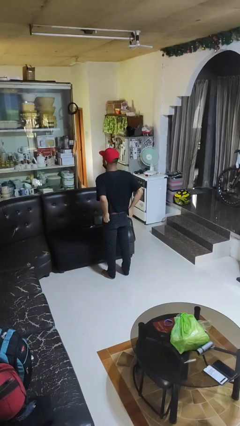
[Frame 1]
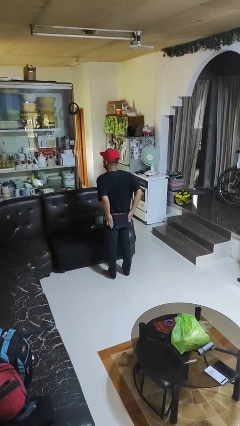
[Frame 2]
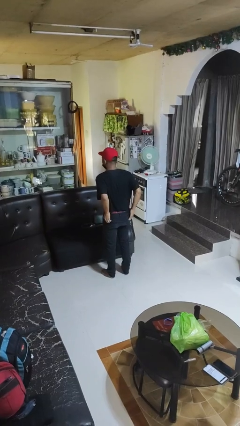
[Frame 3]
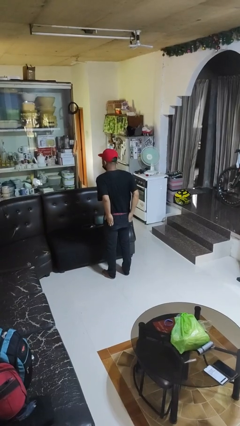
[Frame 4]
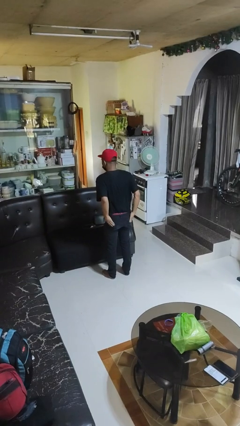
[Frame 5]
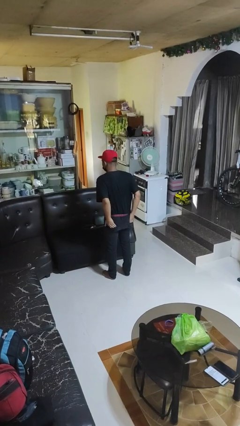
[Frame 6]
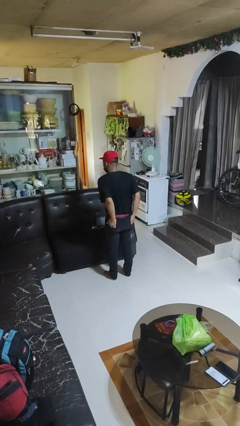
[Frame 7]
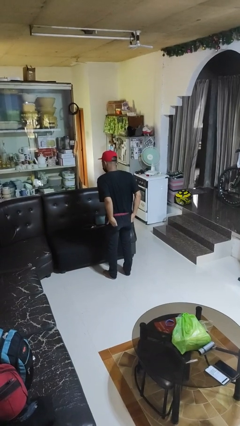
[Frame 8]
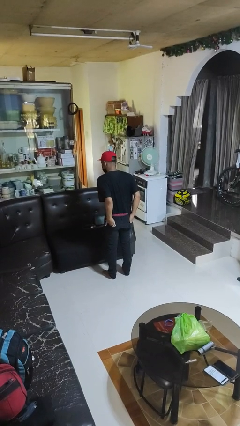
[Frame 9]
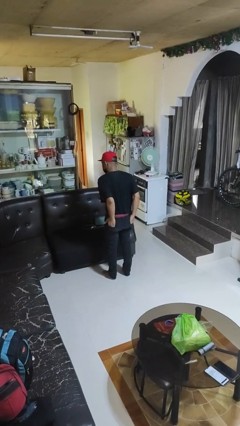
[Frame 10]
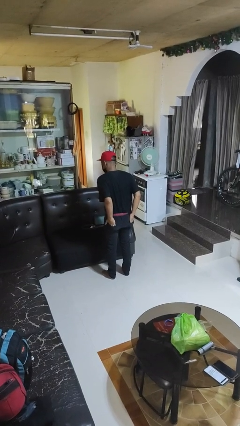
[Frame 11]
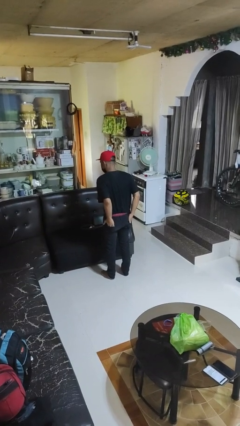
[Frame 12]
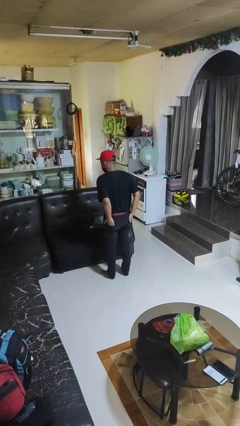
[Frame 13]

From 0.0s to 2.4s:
person puts hands in back pockets

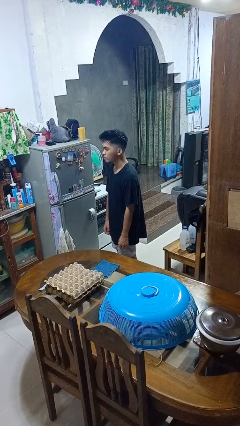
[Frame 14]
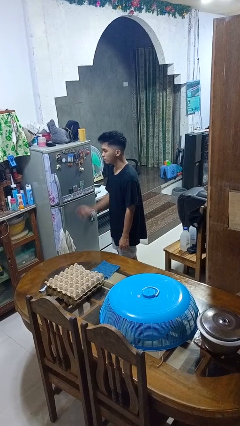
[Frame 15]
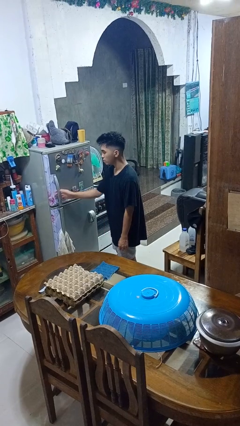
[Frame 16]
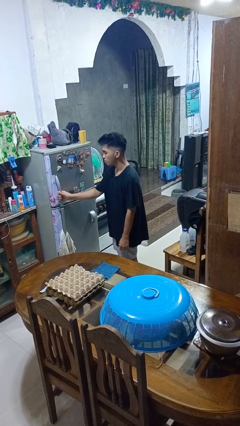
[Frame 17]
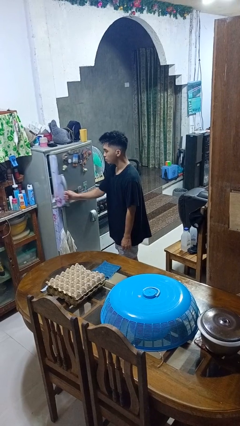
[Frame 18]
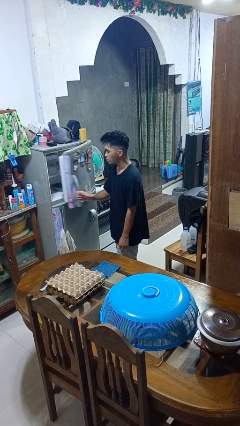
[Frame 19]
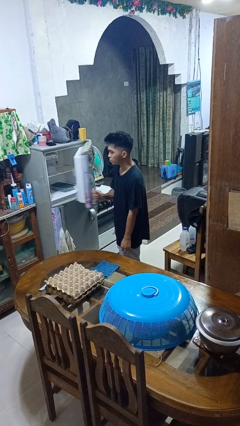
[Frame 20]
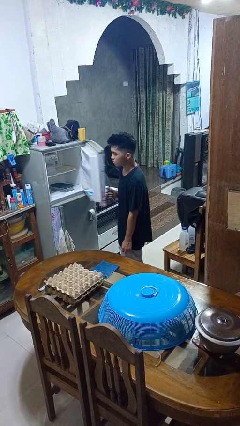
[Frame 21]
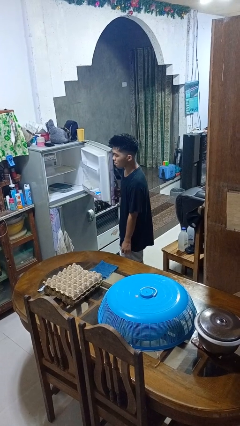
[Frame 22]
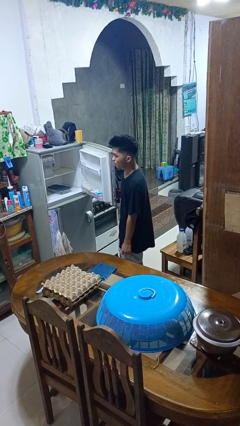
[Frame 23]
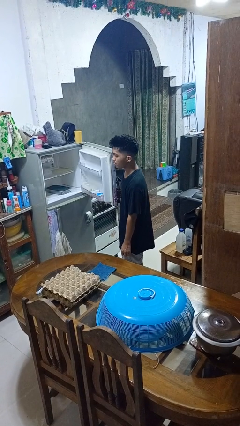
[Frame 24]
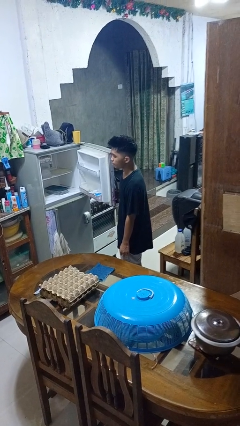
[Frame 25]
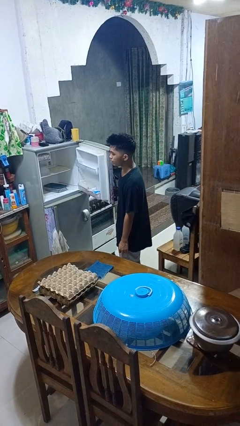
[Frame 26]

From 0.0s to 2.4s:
person opens refrigerator

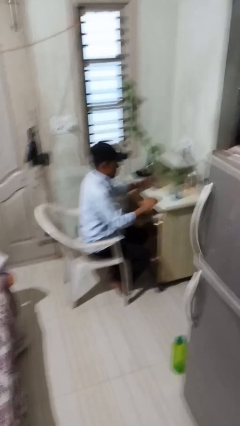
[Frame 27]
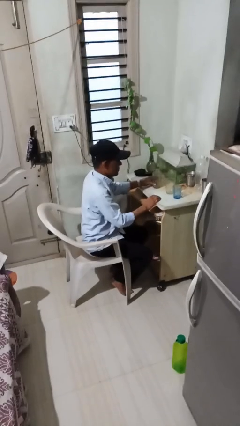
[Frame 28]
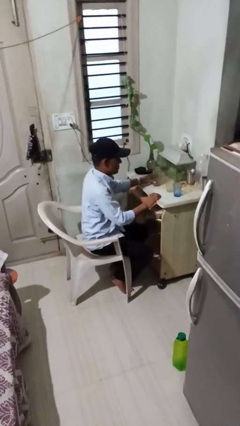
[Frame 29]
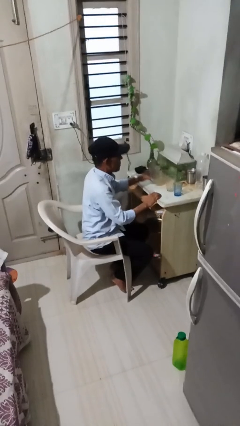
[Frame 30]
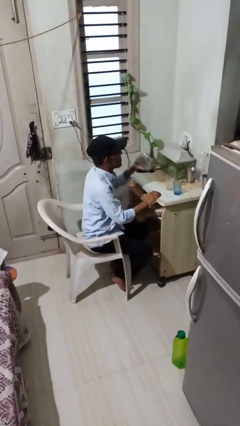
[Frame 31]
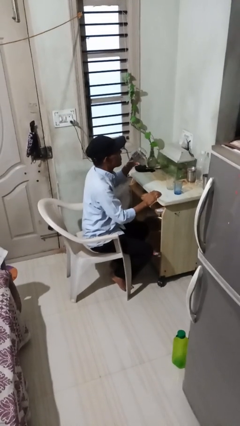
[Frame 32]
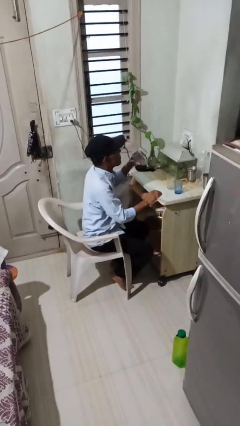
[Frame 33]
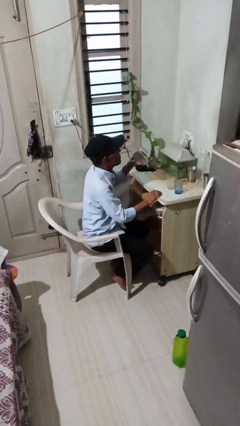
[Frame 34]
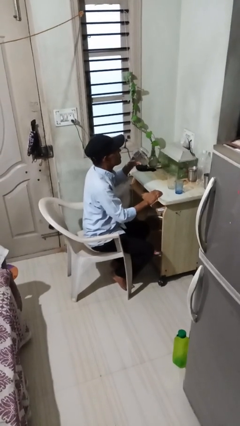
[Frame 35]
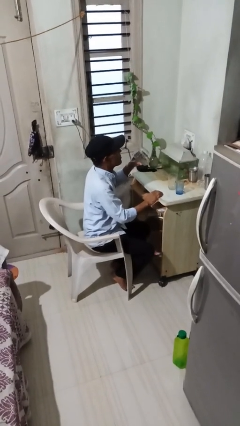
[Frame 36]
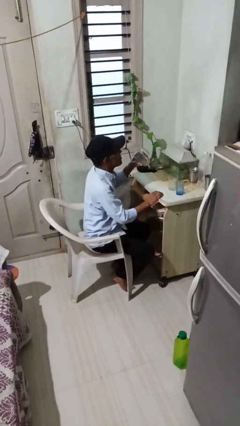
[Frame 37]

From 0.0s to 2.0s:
person picks up object from table

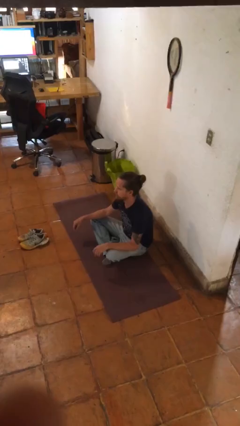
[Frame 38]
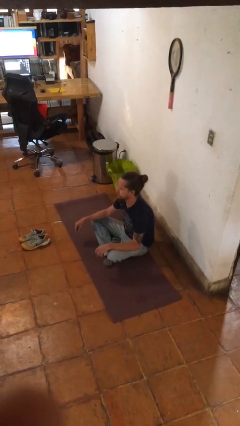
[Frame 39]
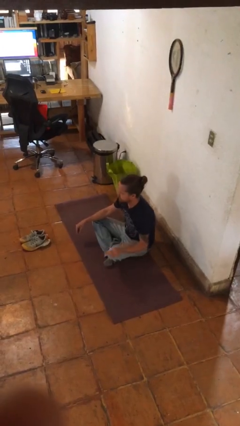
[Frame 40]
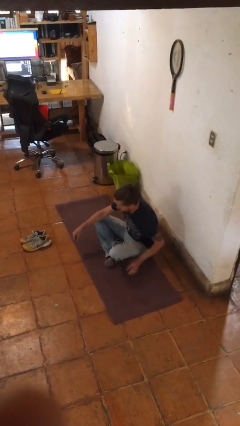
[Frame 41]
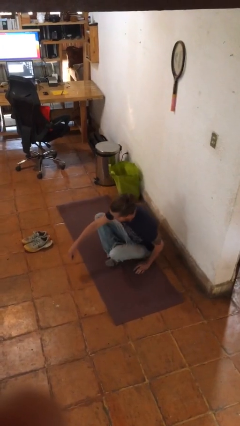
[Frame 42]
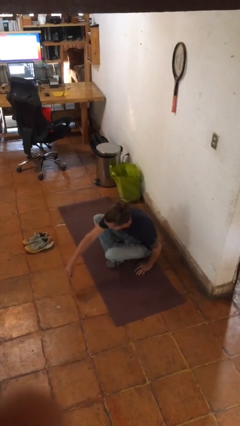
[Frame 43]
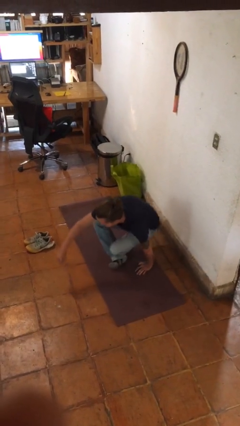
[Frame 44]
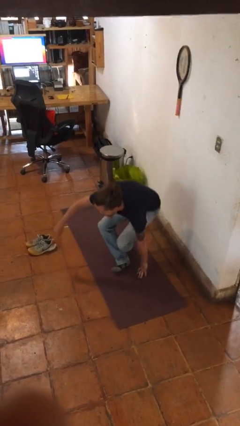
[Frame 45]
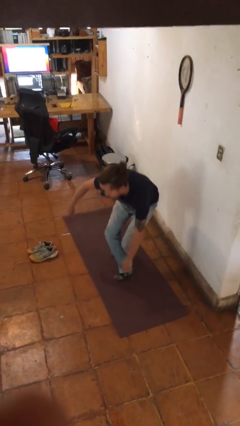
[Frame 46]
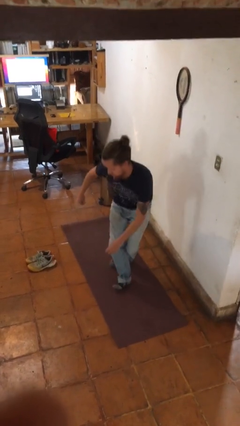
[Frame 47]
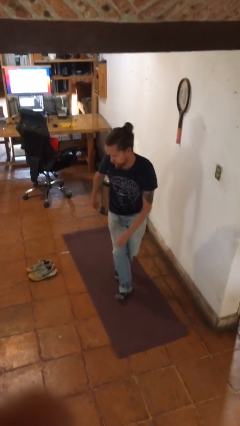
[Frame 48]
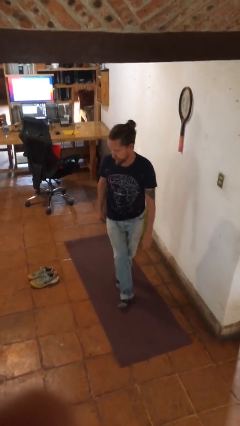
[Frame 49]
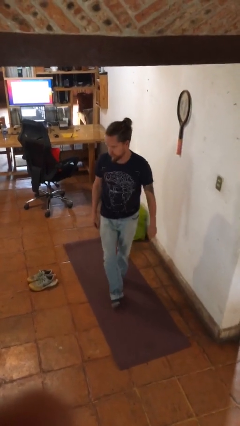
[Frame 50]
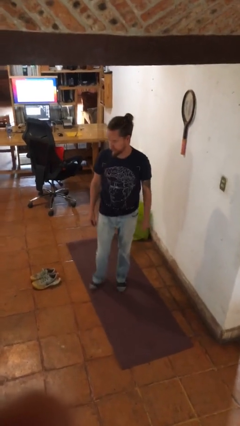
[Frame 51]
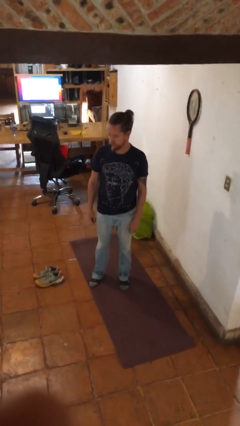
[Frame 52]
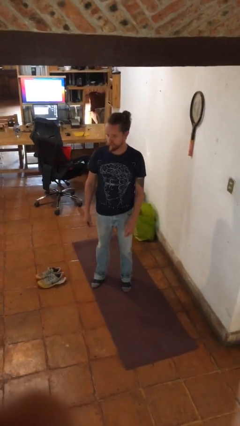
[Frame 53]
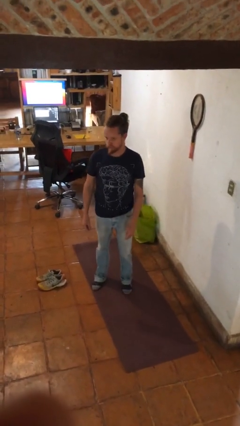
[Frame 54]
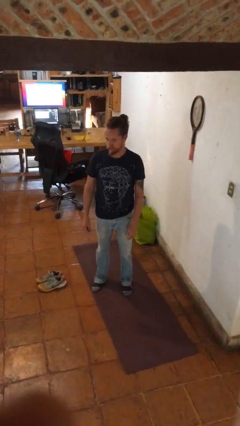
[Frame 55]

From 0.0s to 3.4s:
person stands up from floor

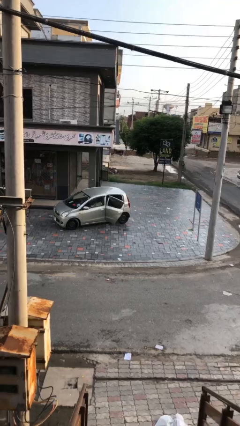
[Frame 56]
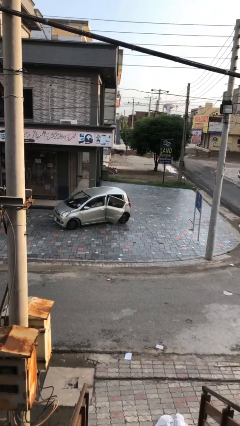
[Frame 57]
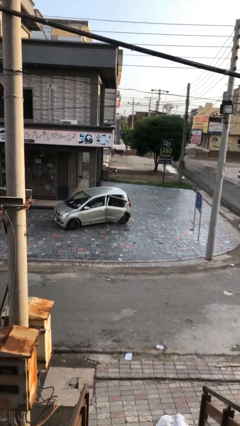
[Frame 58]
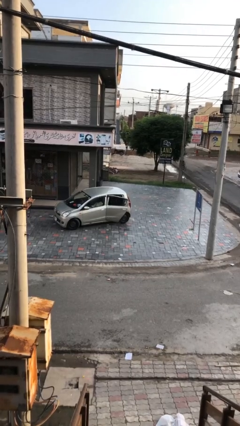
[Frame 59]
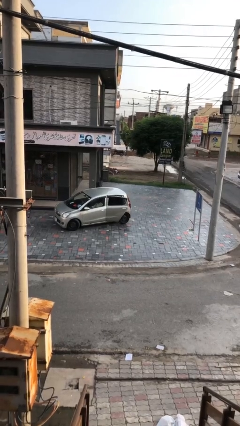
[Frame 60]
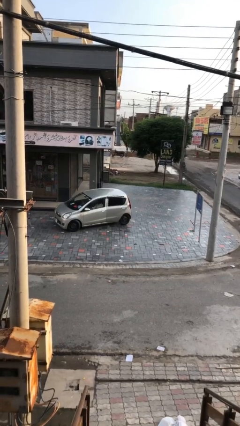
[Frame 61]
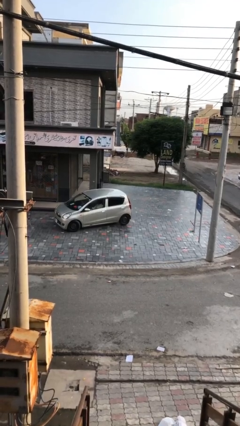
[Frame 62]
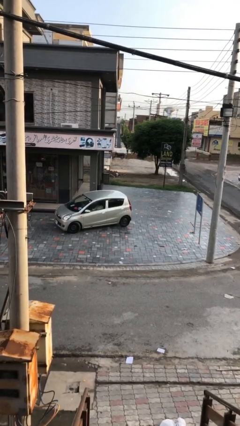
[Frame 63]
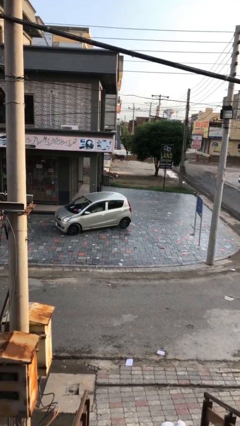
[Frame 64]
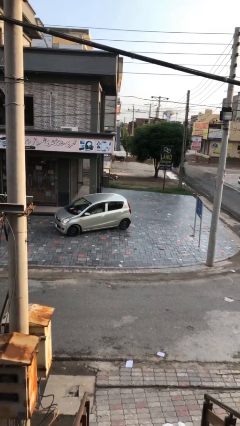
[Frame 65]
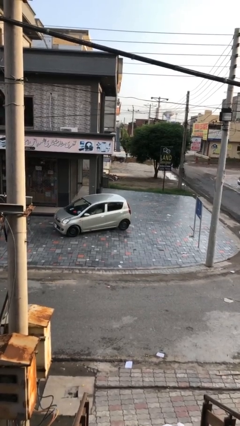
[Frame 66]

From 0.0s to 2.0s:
person closes car door

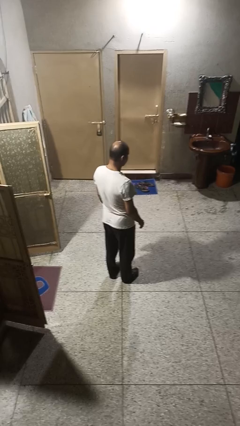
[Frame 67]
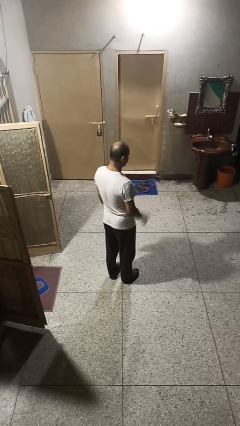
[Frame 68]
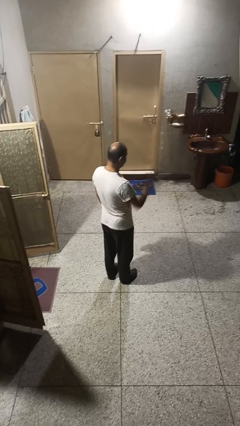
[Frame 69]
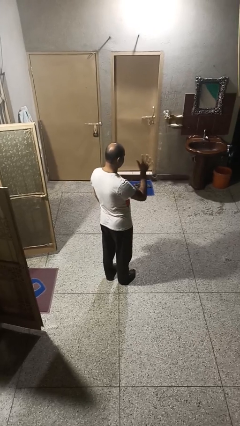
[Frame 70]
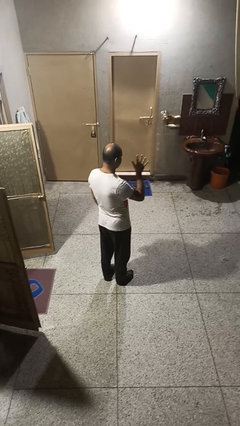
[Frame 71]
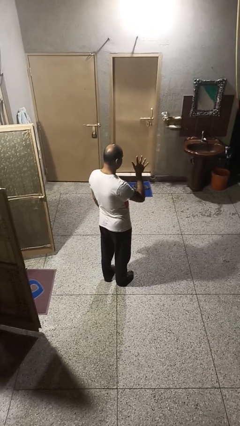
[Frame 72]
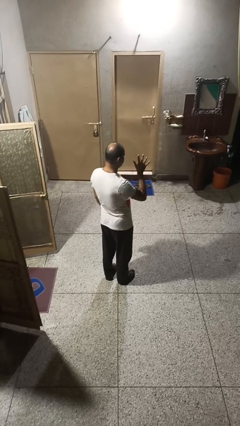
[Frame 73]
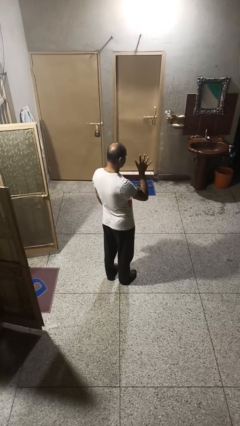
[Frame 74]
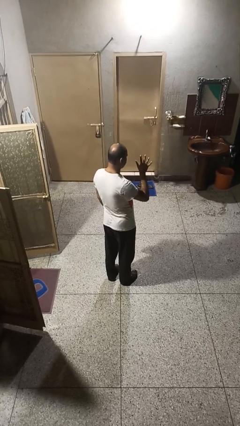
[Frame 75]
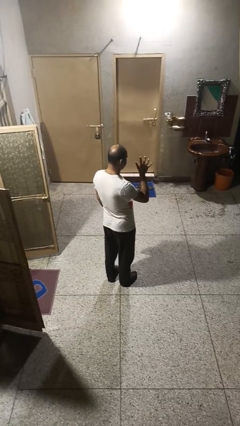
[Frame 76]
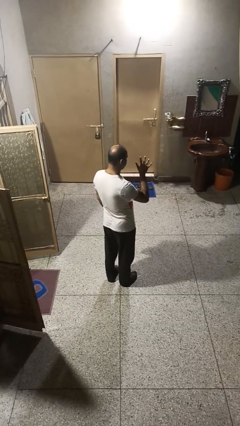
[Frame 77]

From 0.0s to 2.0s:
person gestures number five

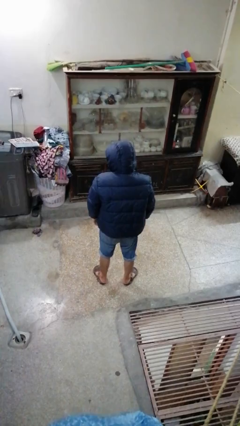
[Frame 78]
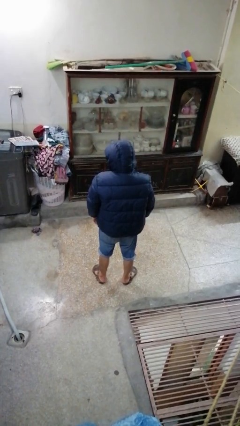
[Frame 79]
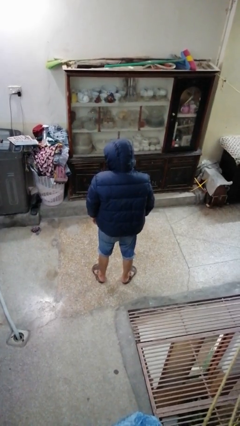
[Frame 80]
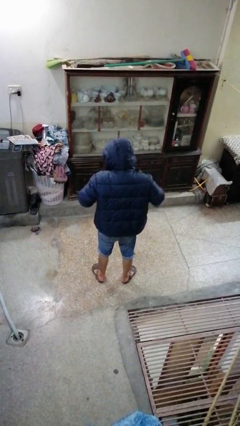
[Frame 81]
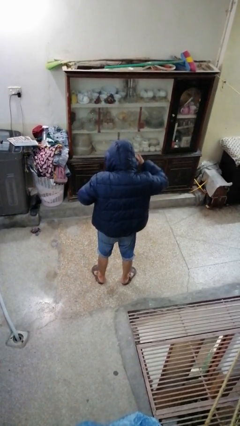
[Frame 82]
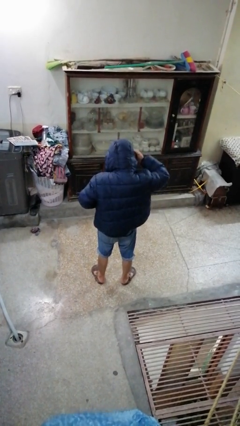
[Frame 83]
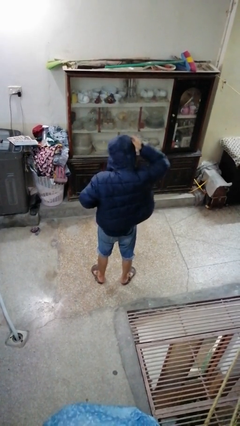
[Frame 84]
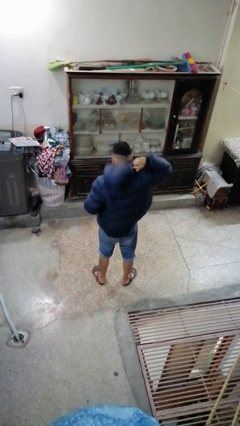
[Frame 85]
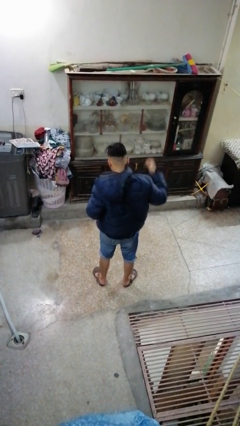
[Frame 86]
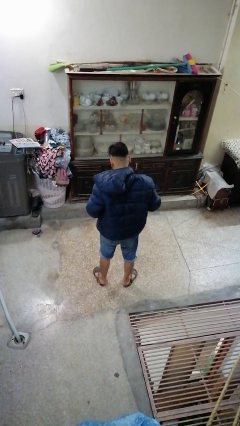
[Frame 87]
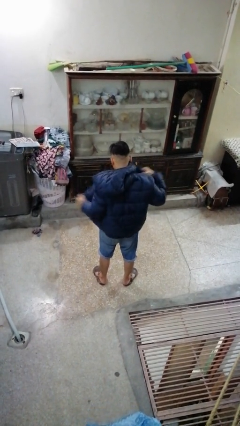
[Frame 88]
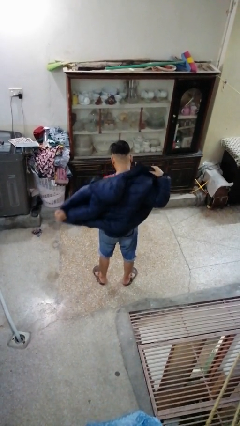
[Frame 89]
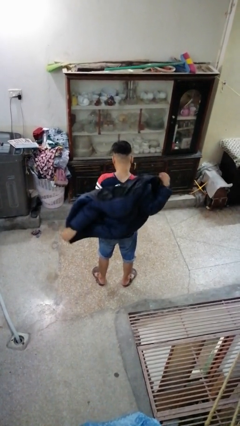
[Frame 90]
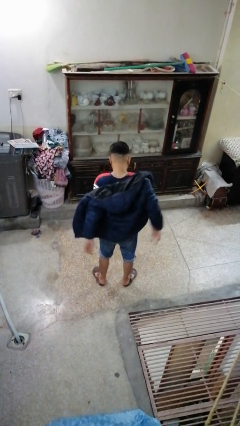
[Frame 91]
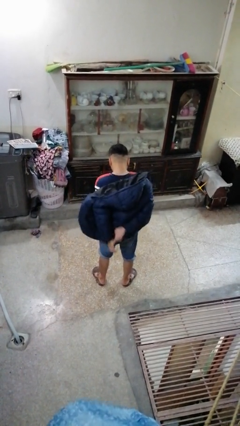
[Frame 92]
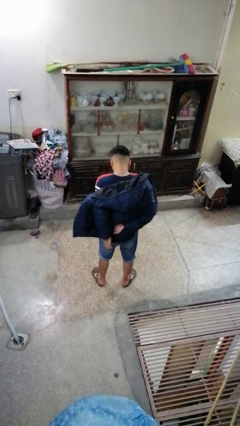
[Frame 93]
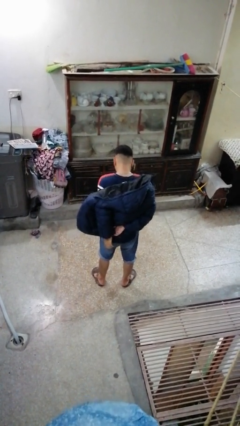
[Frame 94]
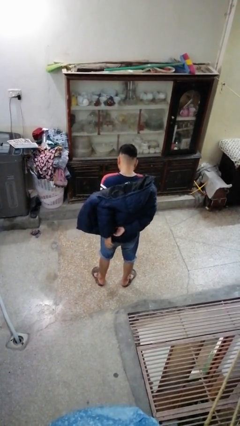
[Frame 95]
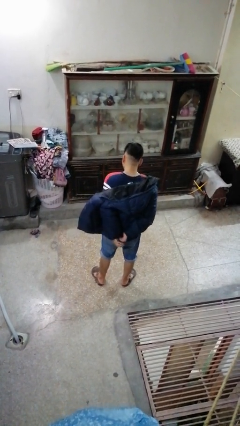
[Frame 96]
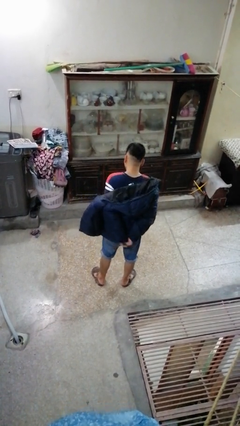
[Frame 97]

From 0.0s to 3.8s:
person takes off hoodie
